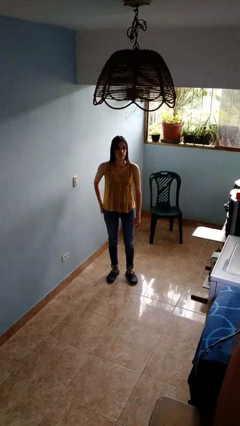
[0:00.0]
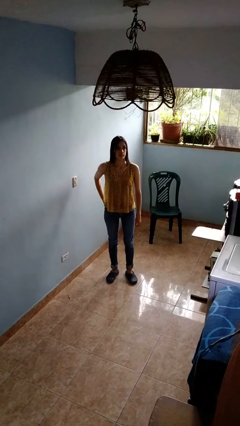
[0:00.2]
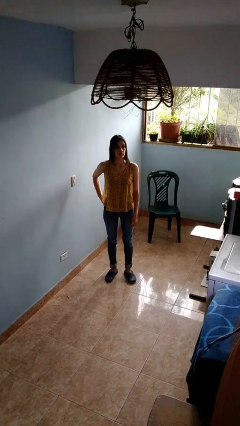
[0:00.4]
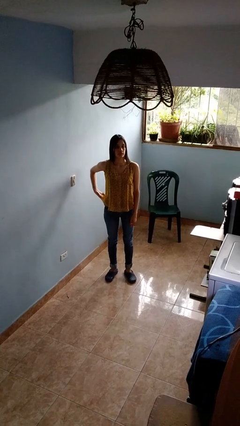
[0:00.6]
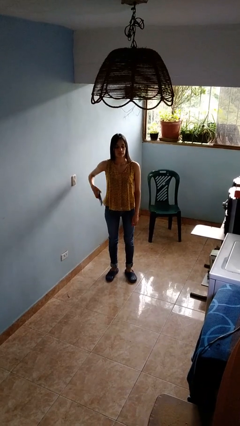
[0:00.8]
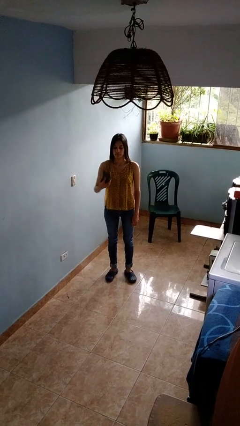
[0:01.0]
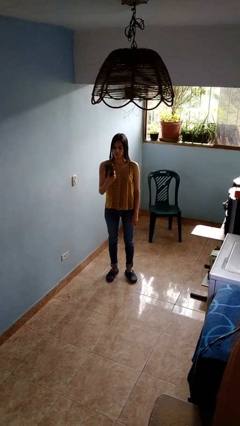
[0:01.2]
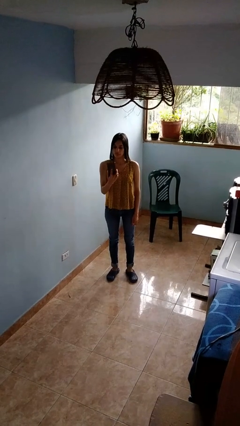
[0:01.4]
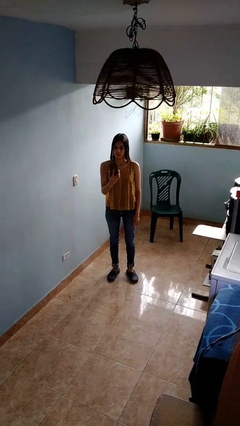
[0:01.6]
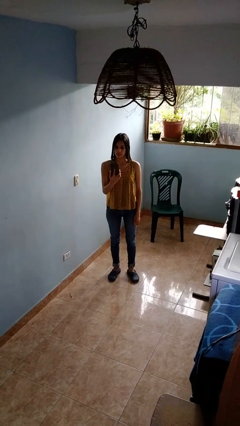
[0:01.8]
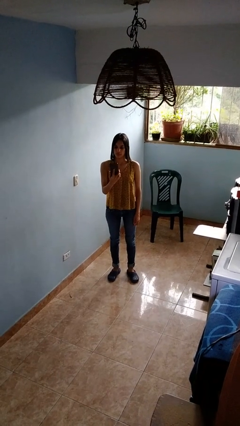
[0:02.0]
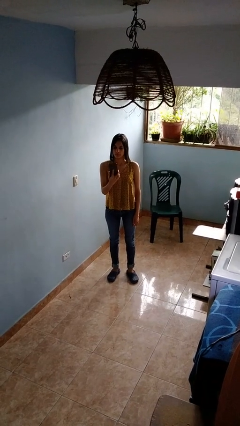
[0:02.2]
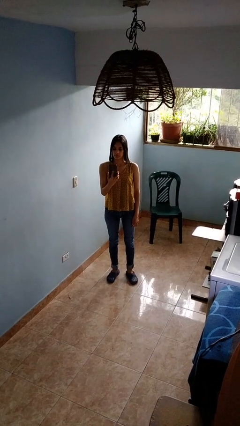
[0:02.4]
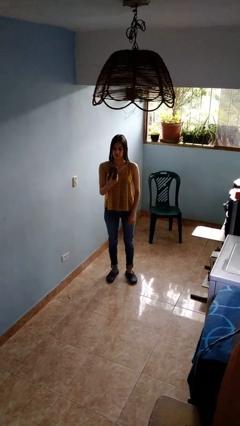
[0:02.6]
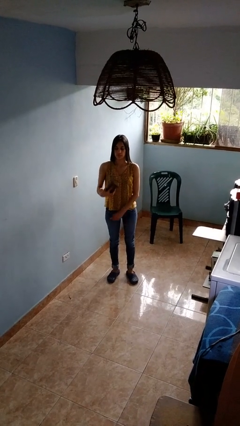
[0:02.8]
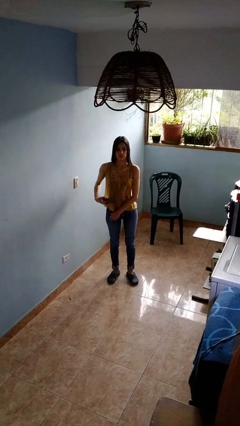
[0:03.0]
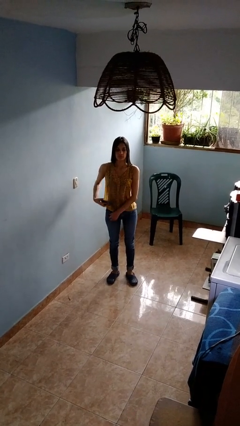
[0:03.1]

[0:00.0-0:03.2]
person takes phone from pocket

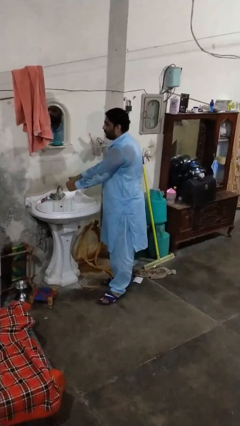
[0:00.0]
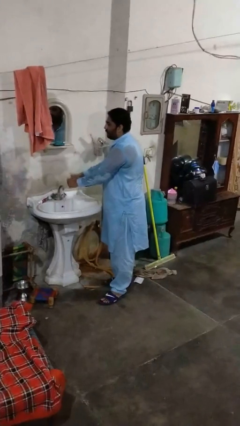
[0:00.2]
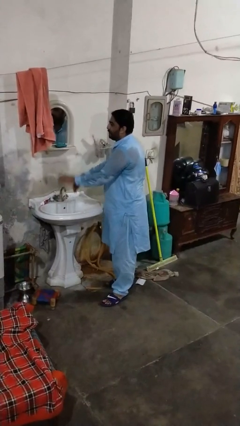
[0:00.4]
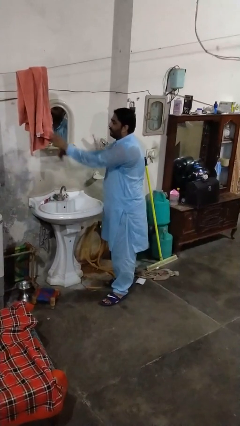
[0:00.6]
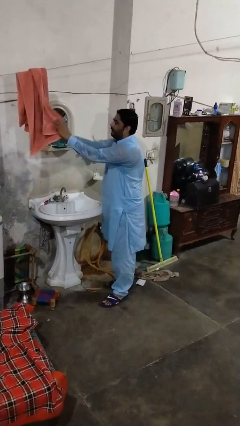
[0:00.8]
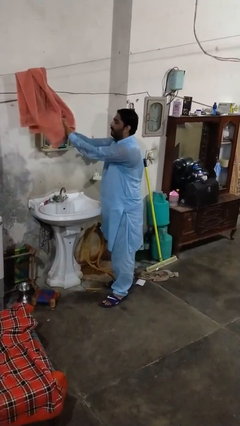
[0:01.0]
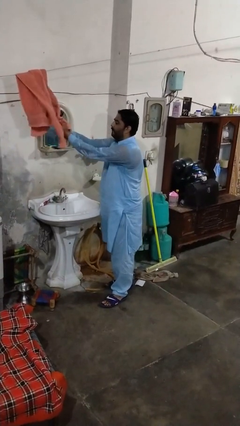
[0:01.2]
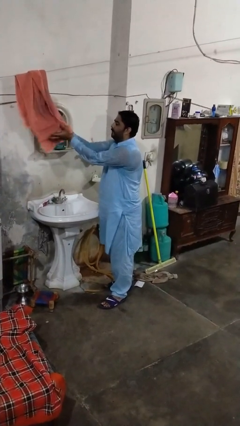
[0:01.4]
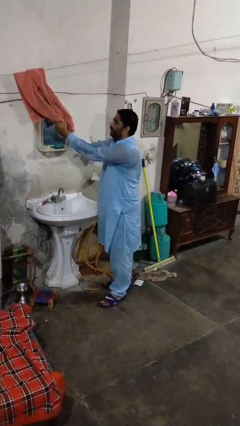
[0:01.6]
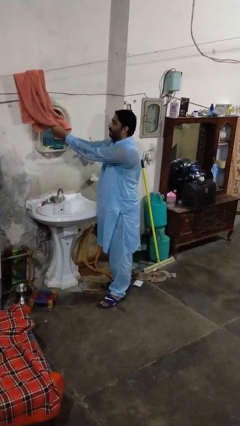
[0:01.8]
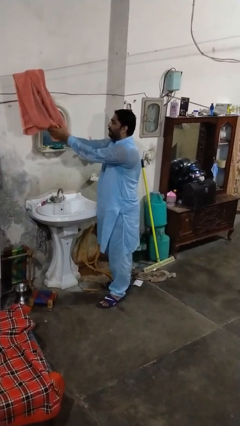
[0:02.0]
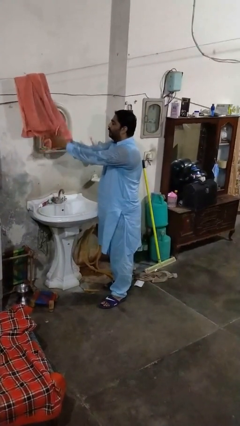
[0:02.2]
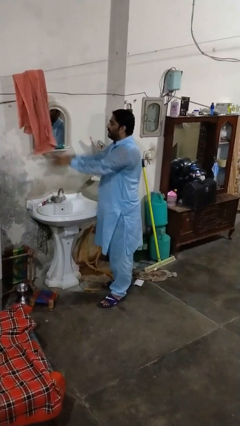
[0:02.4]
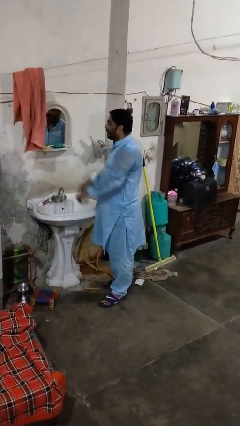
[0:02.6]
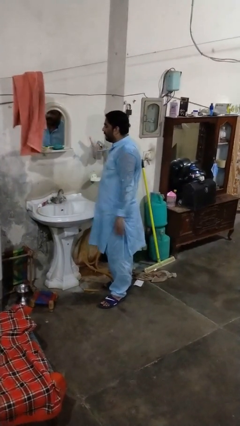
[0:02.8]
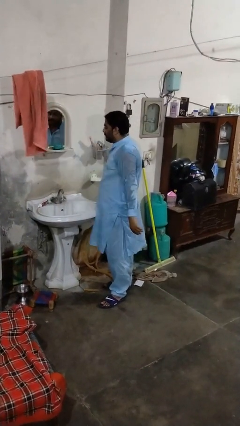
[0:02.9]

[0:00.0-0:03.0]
person dries hands with towel

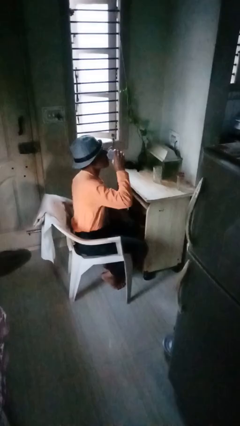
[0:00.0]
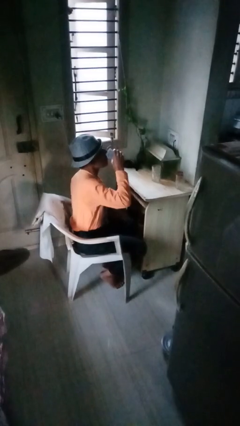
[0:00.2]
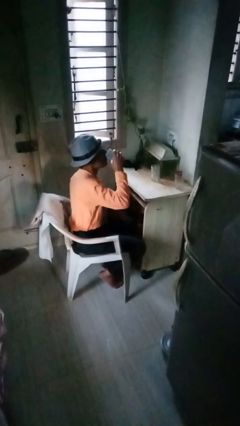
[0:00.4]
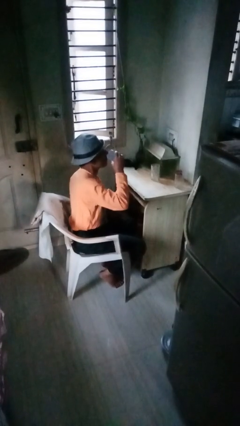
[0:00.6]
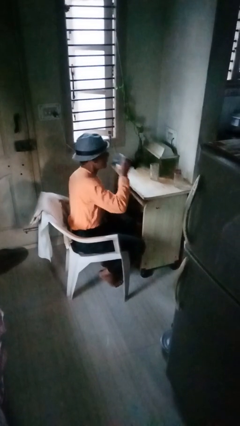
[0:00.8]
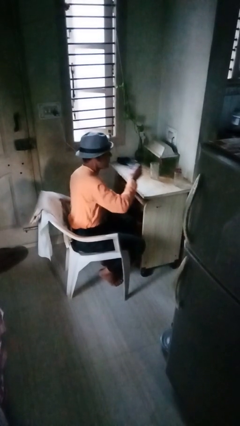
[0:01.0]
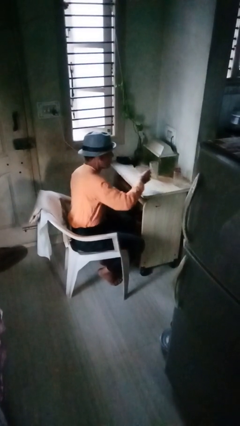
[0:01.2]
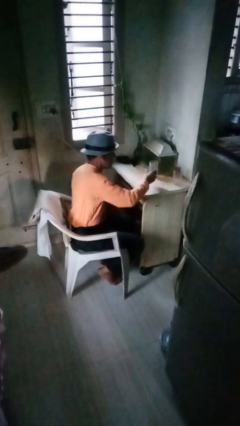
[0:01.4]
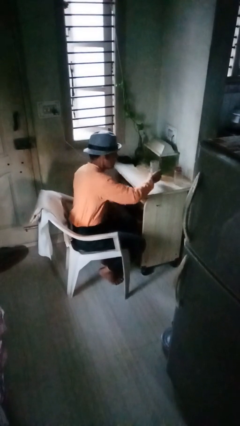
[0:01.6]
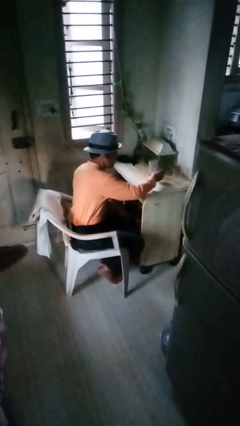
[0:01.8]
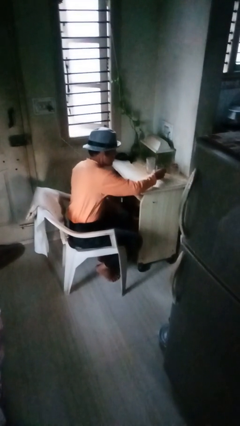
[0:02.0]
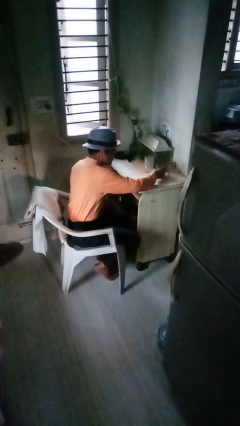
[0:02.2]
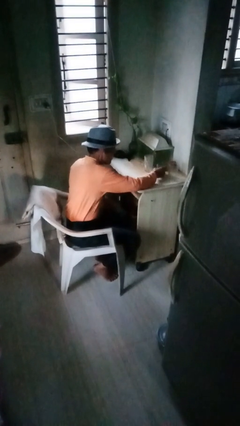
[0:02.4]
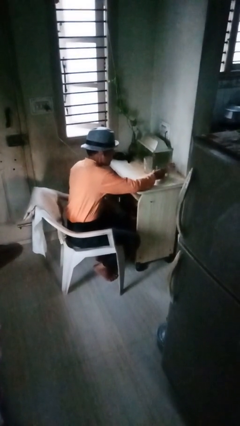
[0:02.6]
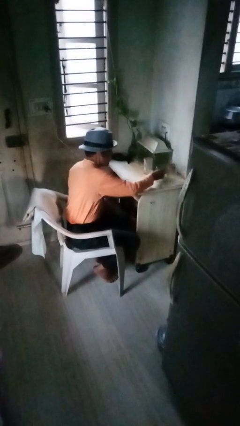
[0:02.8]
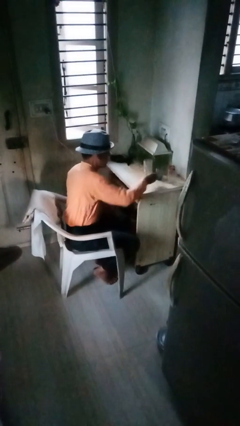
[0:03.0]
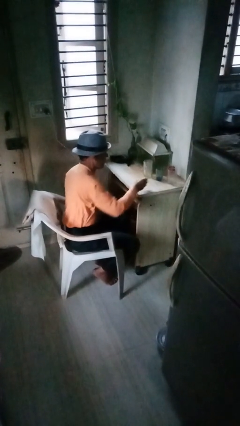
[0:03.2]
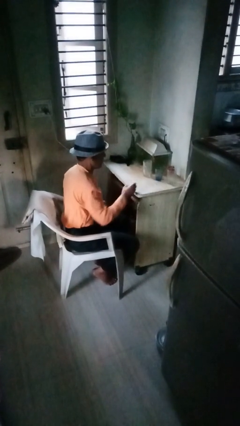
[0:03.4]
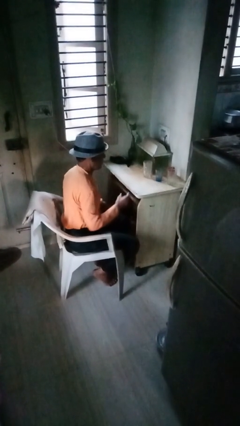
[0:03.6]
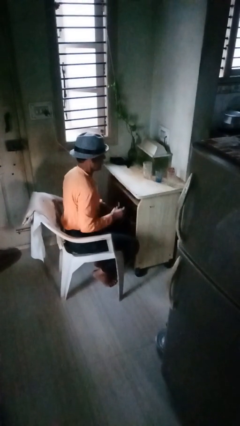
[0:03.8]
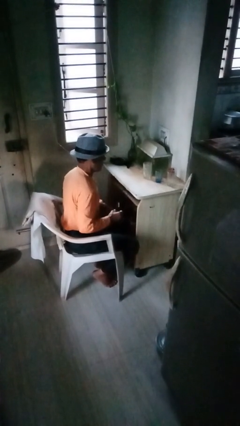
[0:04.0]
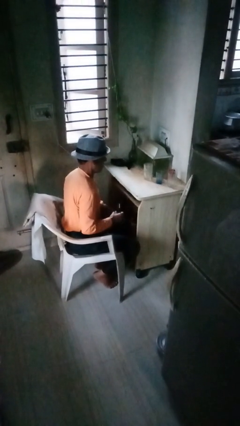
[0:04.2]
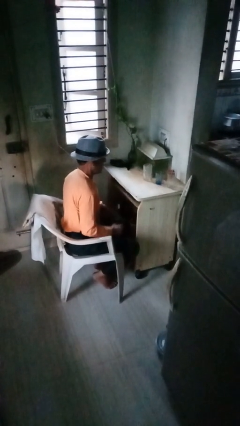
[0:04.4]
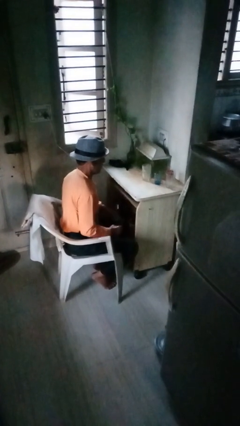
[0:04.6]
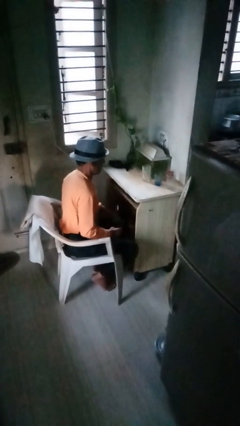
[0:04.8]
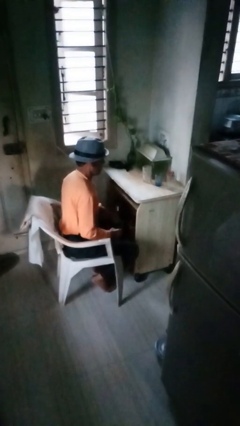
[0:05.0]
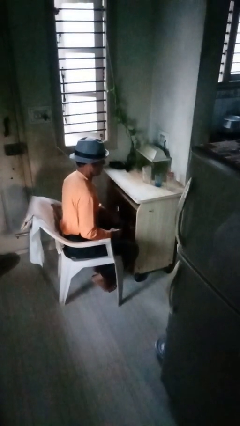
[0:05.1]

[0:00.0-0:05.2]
person puts down object on table

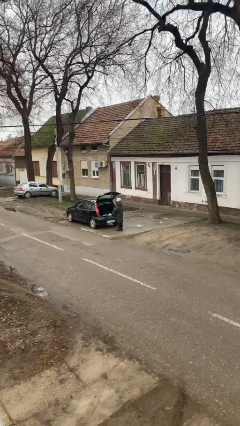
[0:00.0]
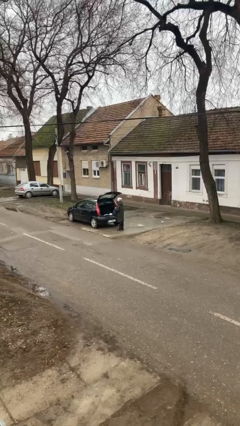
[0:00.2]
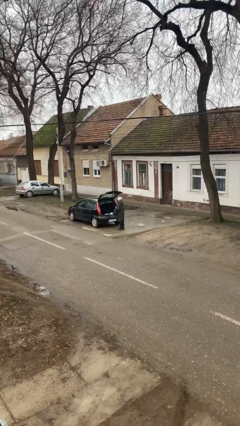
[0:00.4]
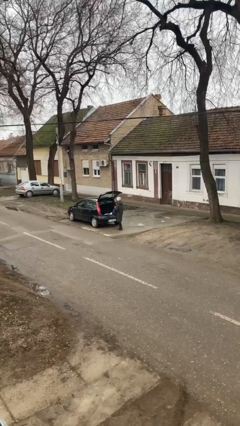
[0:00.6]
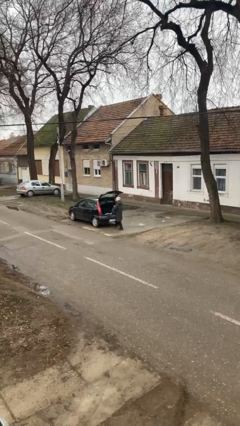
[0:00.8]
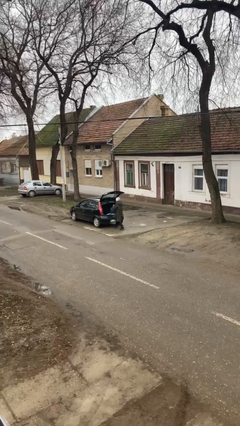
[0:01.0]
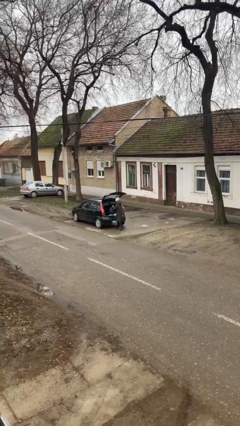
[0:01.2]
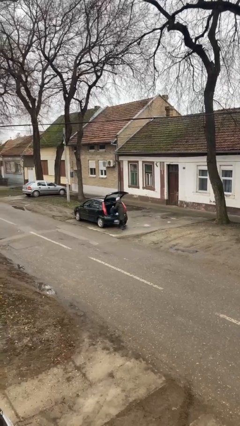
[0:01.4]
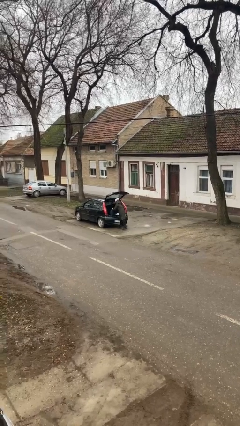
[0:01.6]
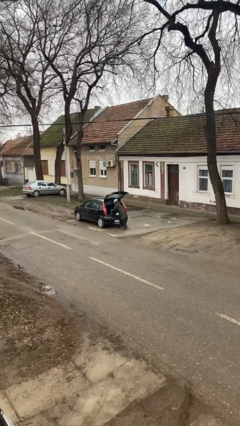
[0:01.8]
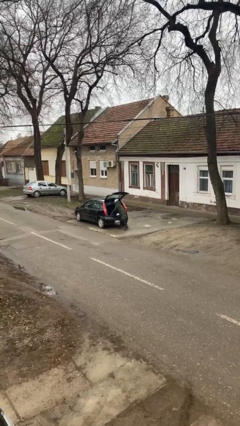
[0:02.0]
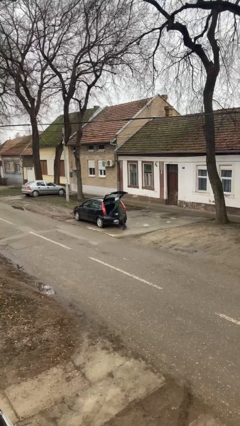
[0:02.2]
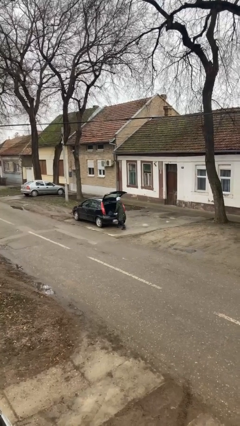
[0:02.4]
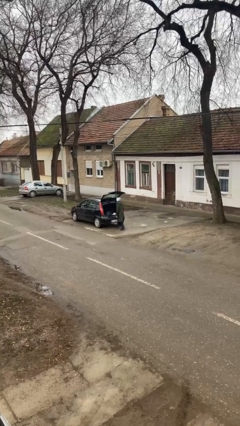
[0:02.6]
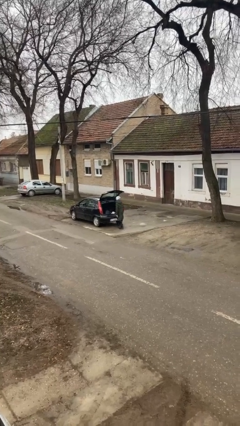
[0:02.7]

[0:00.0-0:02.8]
person loads car

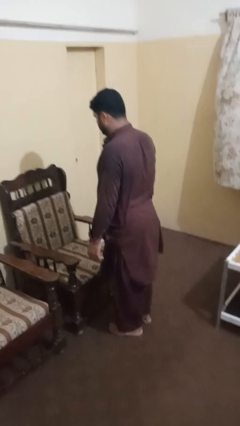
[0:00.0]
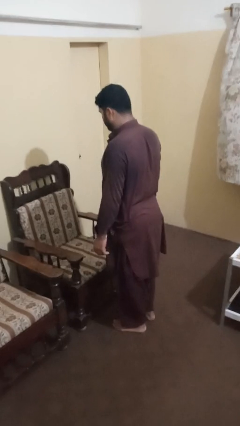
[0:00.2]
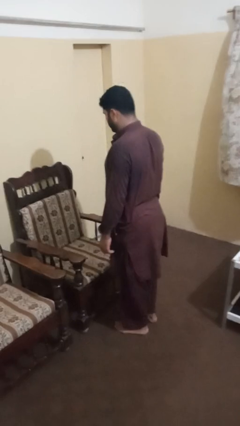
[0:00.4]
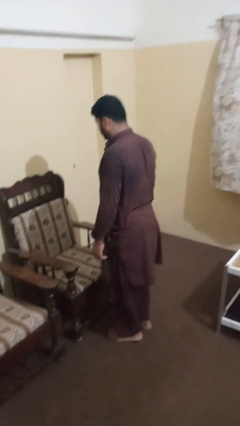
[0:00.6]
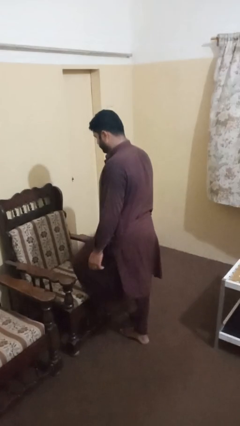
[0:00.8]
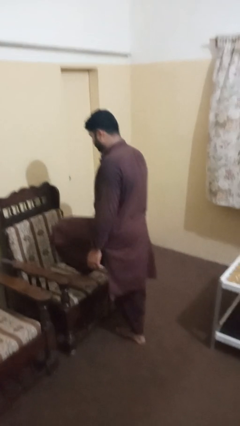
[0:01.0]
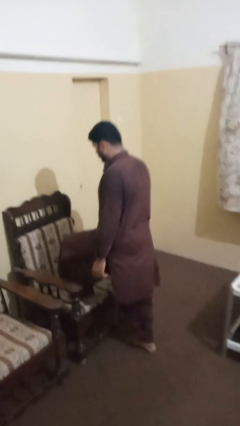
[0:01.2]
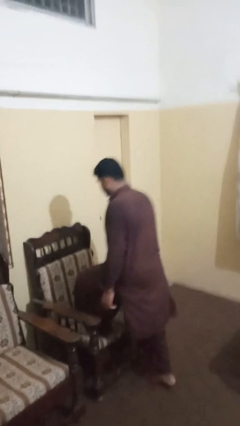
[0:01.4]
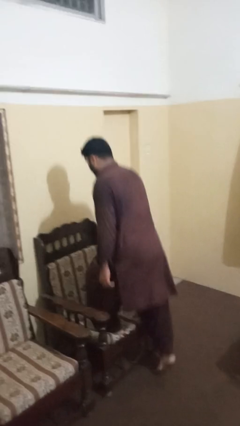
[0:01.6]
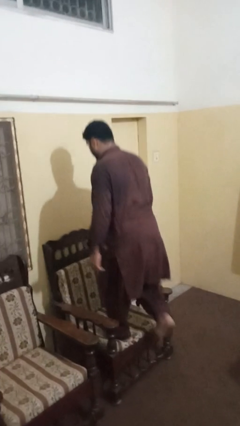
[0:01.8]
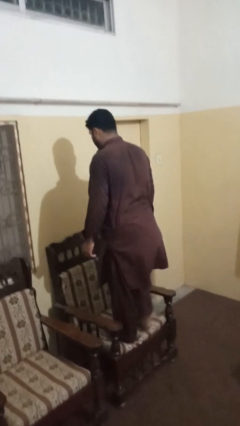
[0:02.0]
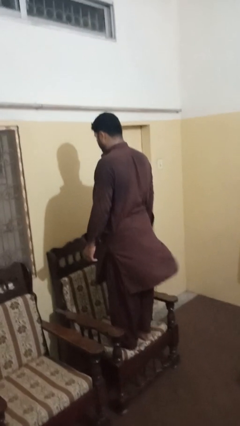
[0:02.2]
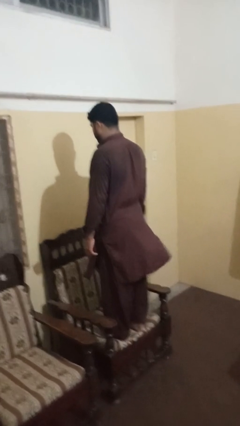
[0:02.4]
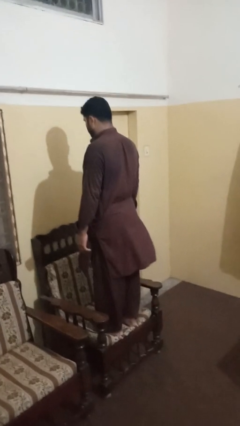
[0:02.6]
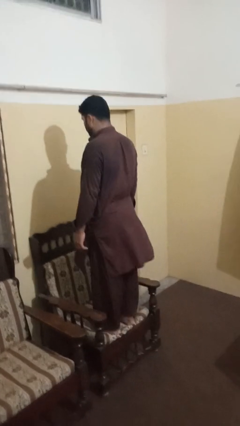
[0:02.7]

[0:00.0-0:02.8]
person climbs on chair

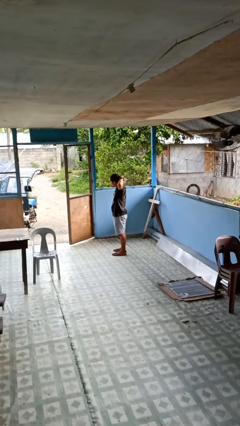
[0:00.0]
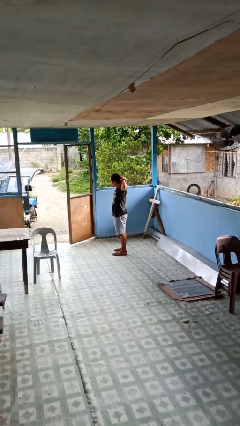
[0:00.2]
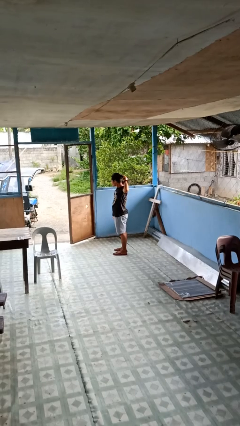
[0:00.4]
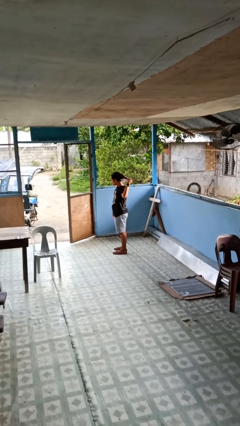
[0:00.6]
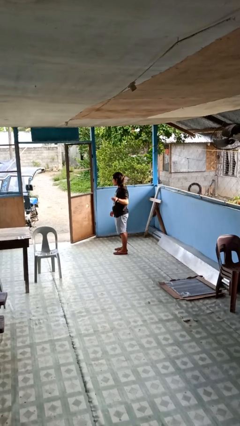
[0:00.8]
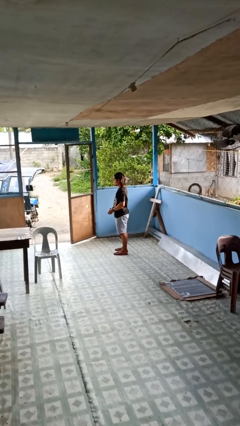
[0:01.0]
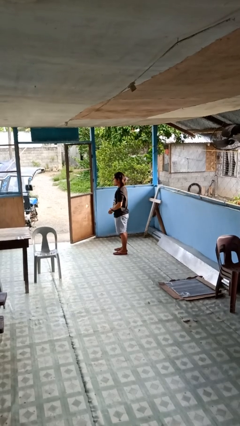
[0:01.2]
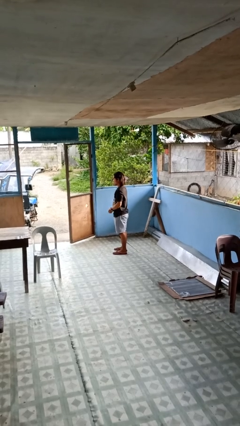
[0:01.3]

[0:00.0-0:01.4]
person takes off hairtie
